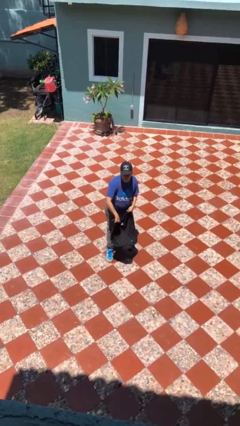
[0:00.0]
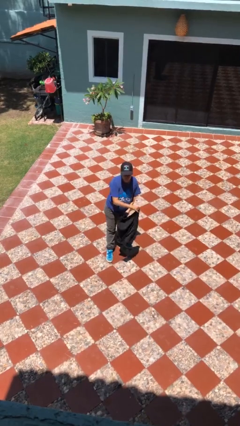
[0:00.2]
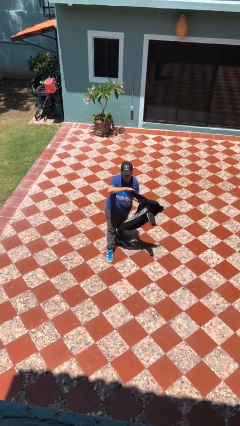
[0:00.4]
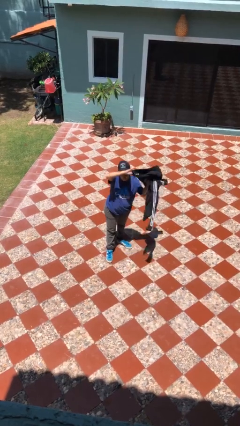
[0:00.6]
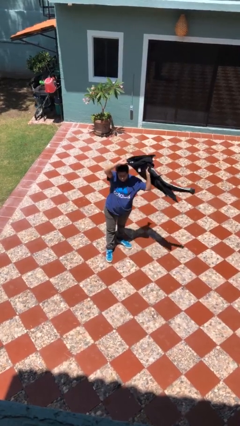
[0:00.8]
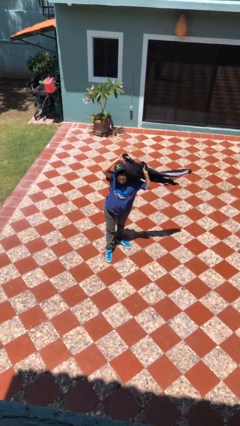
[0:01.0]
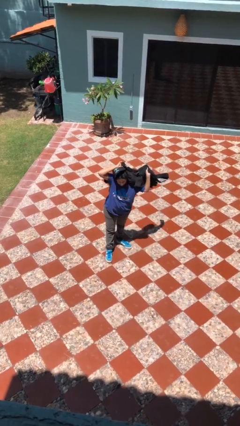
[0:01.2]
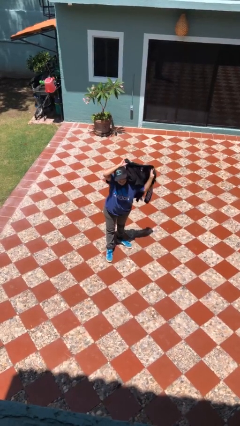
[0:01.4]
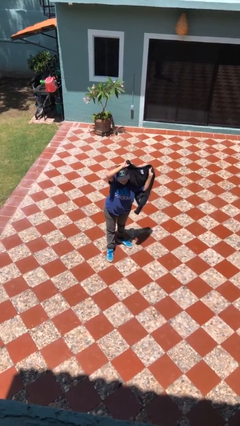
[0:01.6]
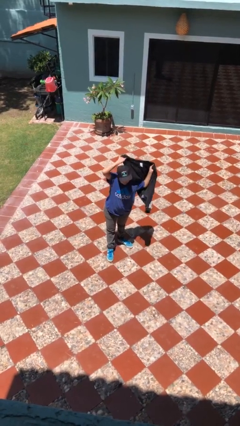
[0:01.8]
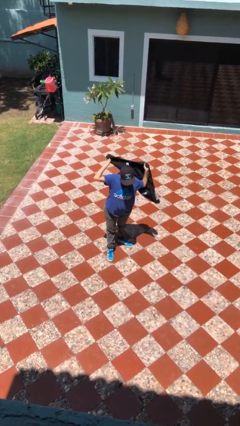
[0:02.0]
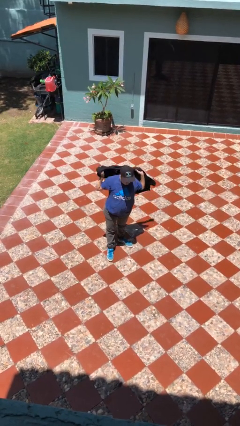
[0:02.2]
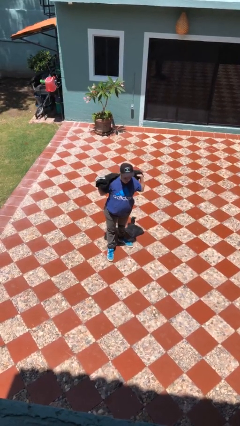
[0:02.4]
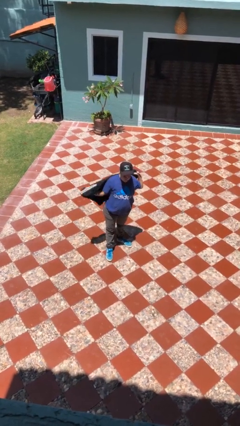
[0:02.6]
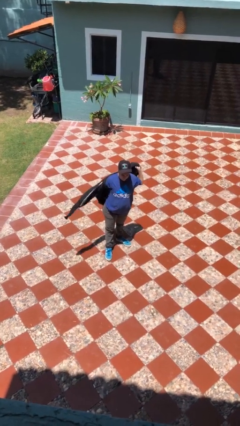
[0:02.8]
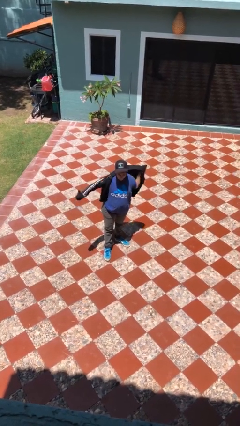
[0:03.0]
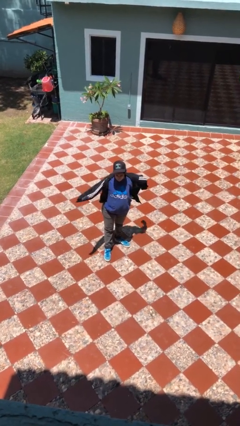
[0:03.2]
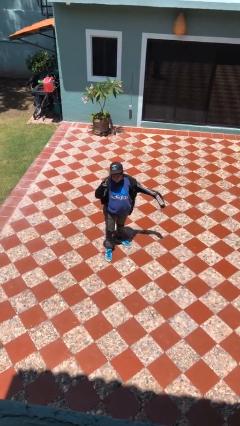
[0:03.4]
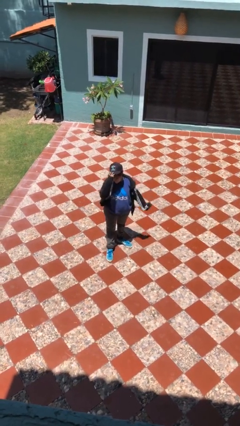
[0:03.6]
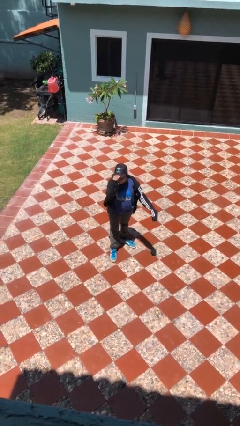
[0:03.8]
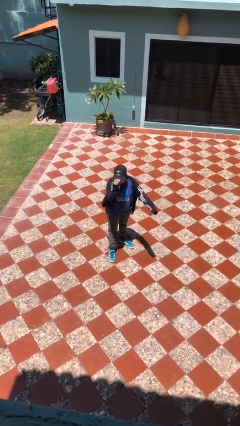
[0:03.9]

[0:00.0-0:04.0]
person puts on jacket

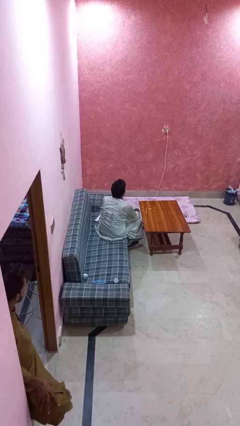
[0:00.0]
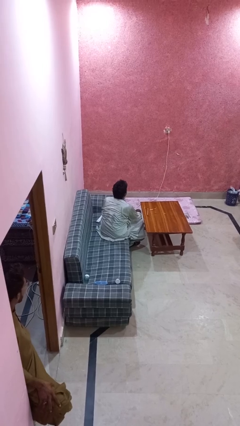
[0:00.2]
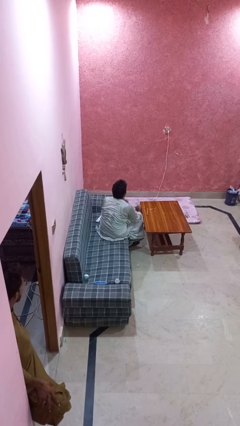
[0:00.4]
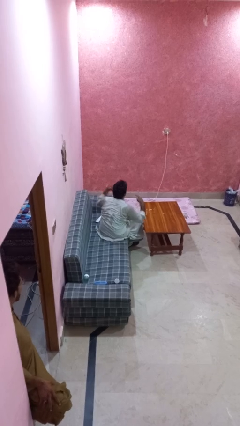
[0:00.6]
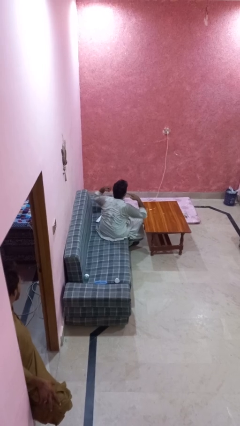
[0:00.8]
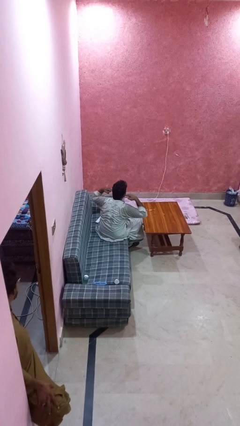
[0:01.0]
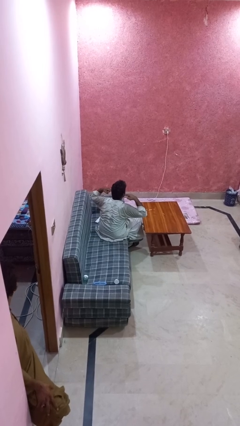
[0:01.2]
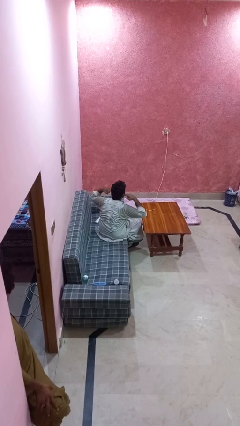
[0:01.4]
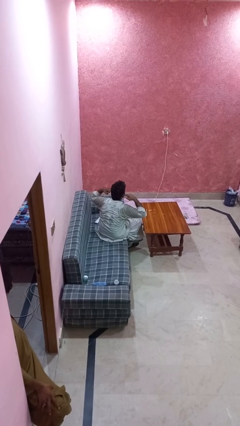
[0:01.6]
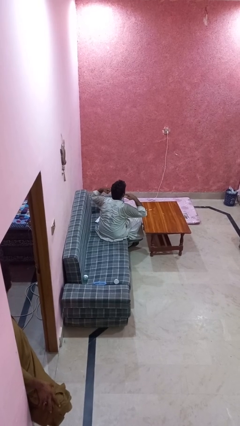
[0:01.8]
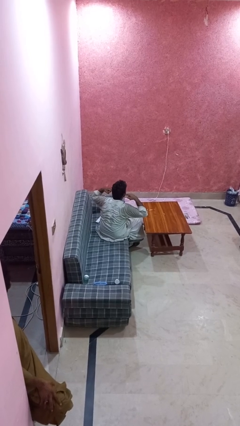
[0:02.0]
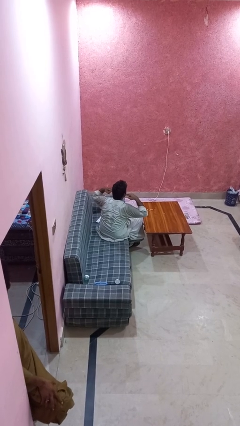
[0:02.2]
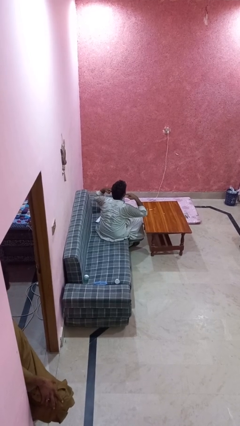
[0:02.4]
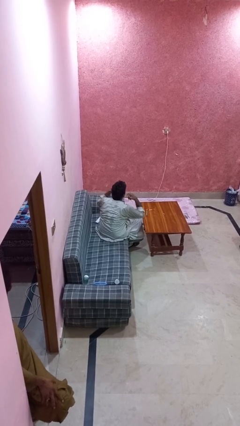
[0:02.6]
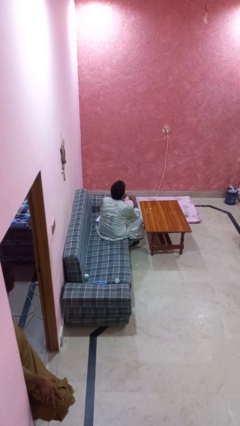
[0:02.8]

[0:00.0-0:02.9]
person puts fingers in ear

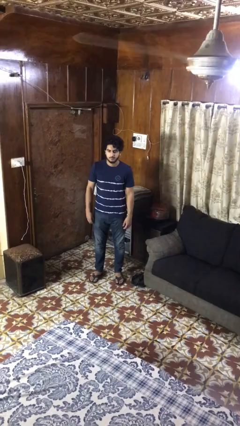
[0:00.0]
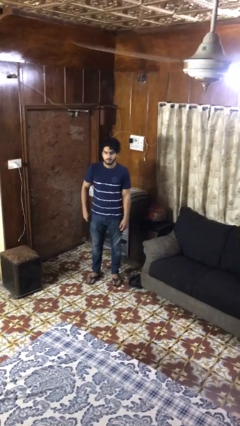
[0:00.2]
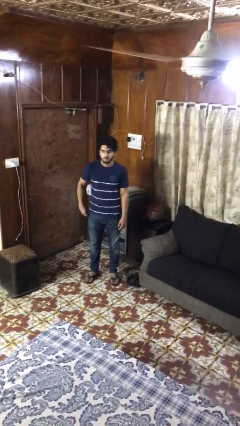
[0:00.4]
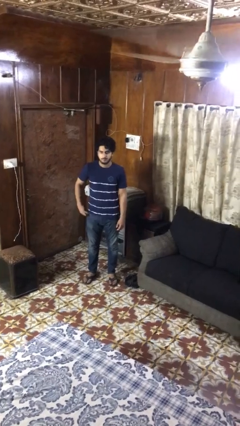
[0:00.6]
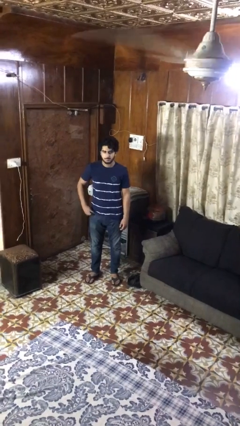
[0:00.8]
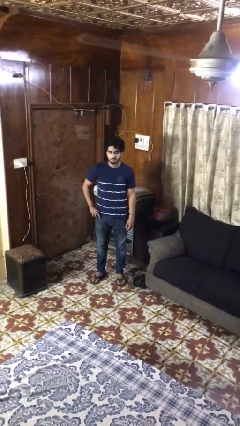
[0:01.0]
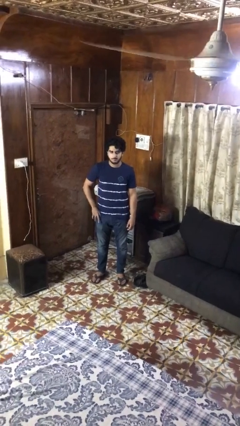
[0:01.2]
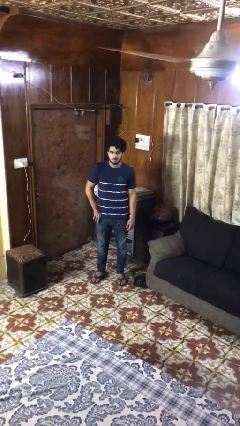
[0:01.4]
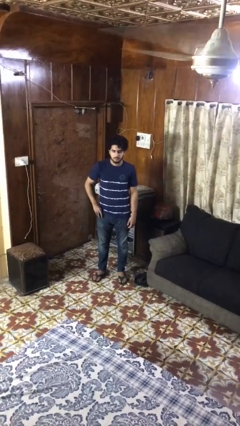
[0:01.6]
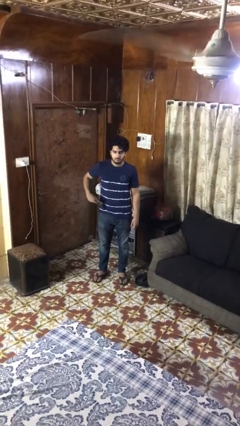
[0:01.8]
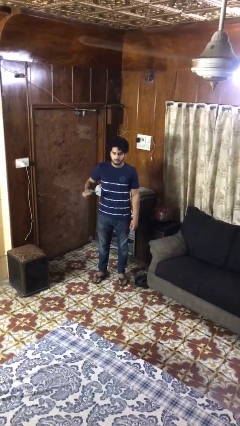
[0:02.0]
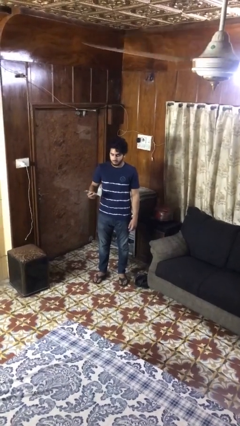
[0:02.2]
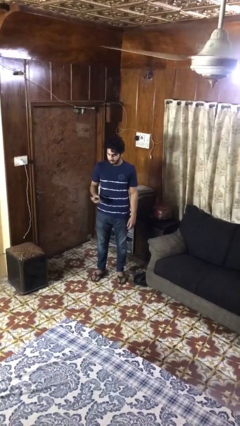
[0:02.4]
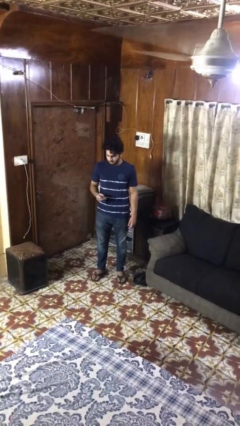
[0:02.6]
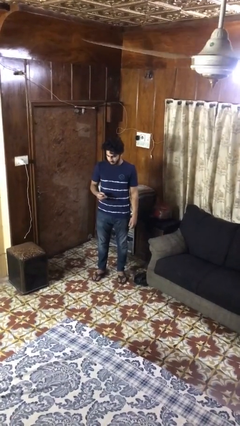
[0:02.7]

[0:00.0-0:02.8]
person takes phone from pocket

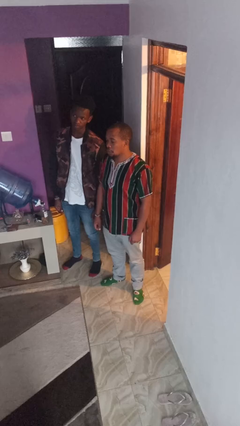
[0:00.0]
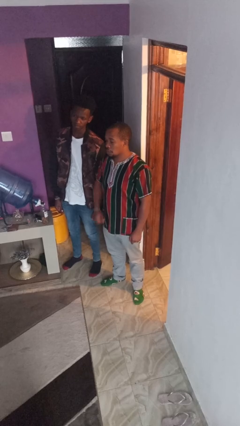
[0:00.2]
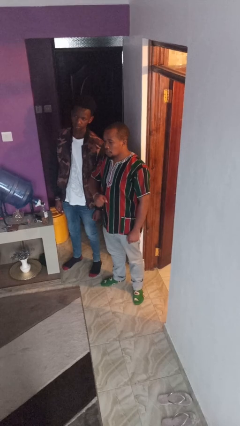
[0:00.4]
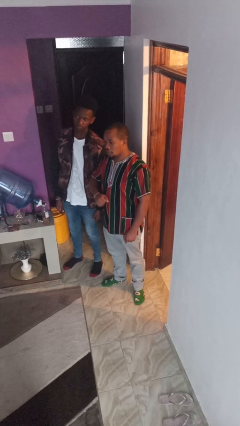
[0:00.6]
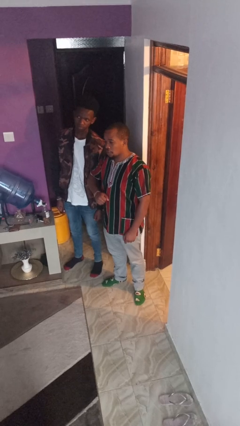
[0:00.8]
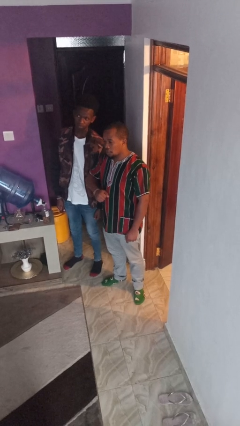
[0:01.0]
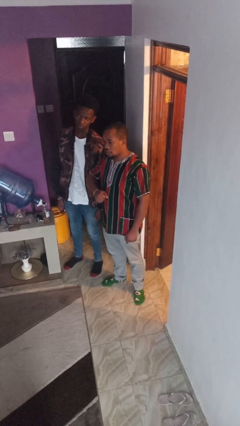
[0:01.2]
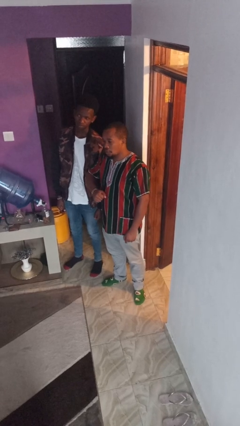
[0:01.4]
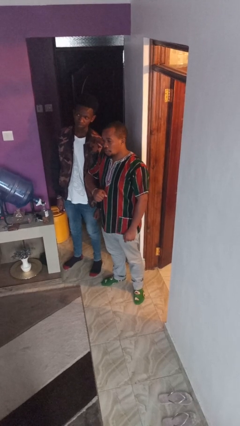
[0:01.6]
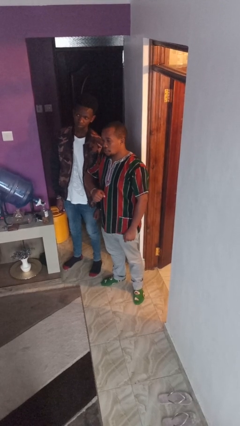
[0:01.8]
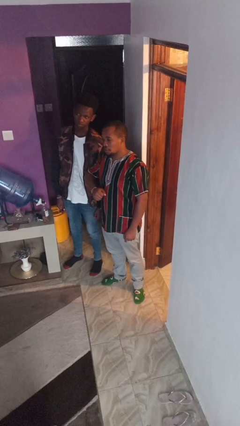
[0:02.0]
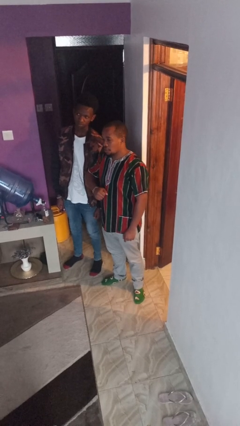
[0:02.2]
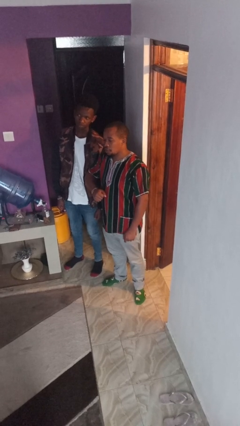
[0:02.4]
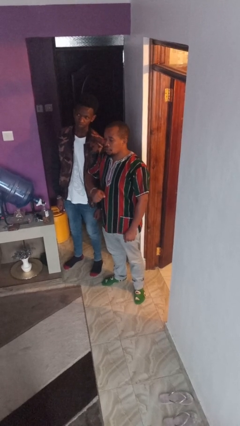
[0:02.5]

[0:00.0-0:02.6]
person nudges person with elbow

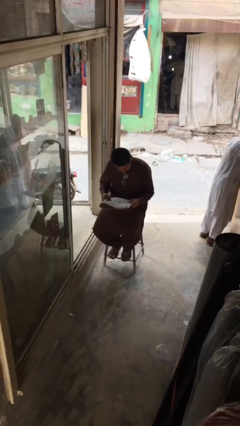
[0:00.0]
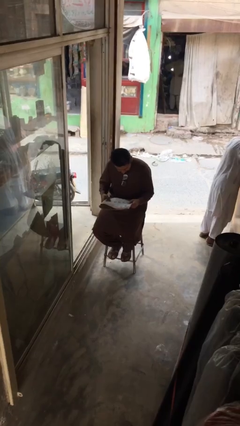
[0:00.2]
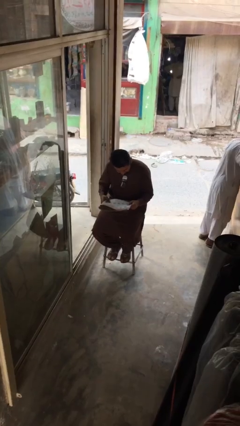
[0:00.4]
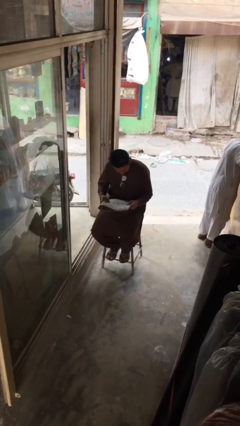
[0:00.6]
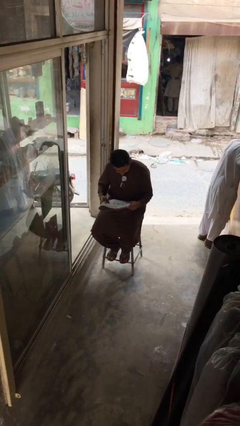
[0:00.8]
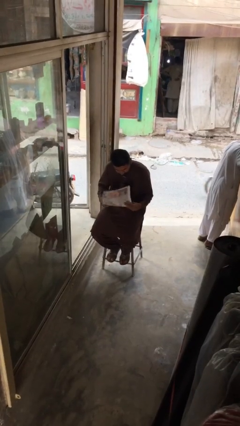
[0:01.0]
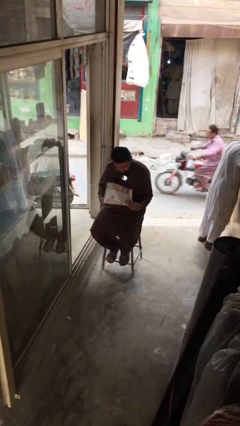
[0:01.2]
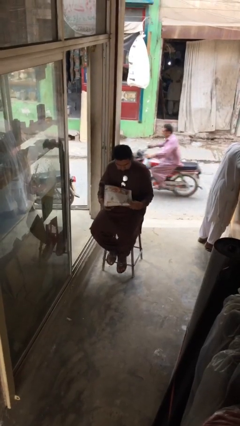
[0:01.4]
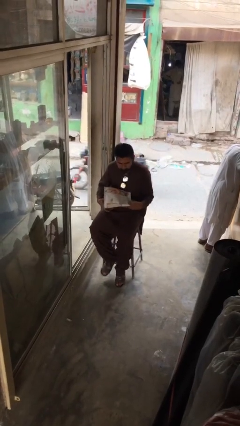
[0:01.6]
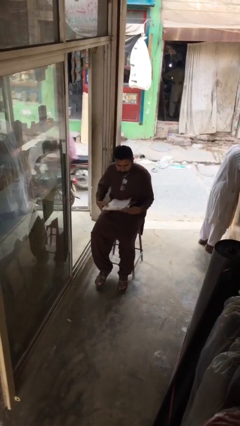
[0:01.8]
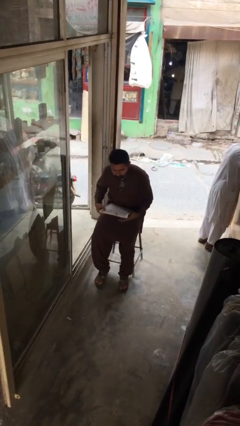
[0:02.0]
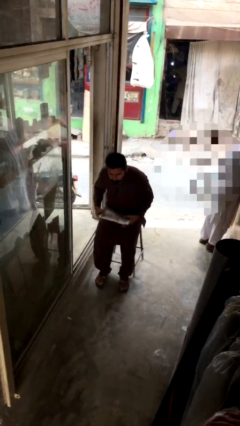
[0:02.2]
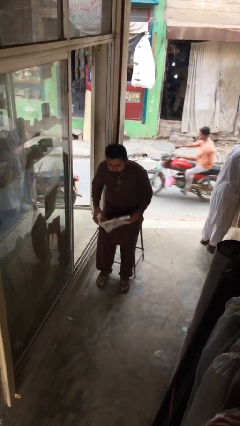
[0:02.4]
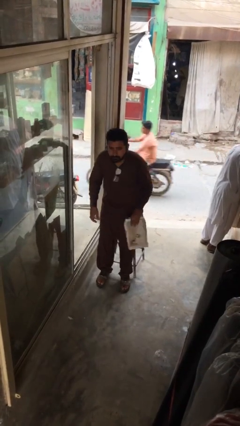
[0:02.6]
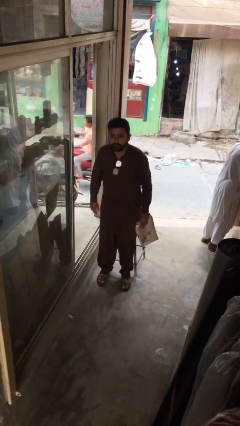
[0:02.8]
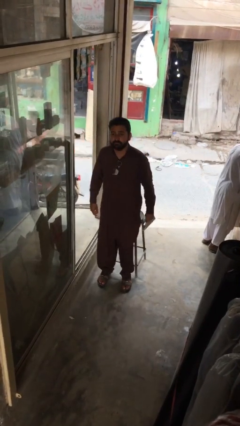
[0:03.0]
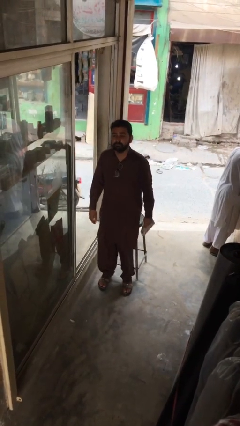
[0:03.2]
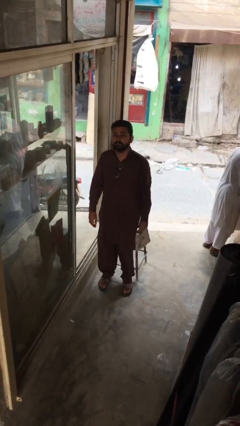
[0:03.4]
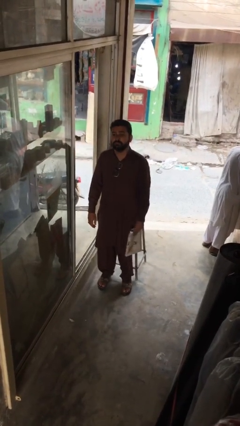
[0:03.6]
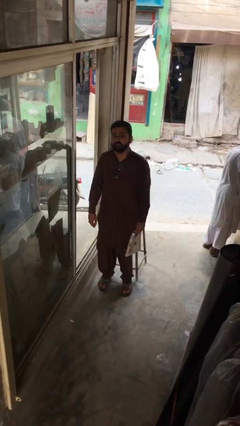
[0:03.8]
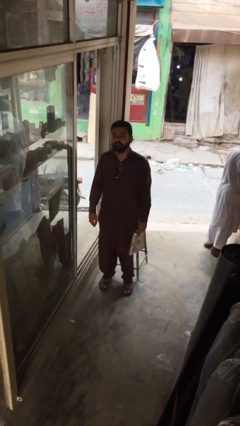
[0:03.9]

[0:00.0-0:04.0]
person stands up

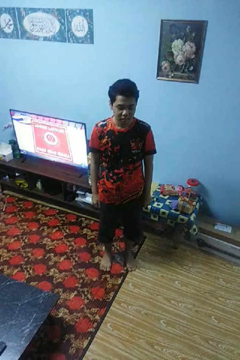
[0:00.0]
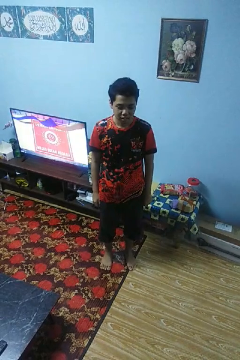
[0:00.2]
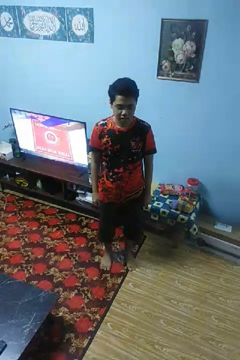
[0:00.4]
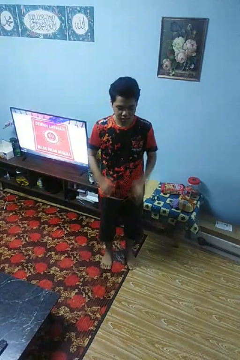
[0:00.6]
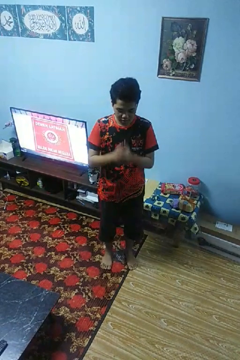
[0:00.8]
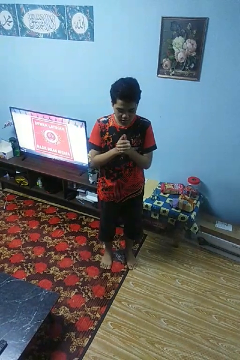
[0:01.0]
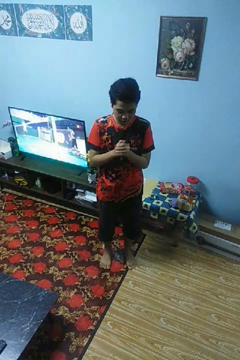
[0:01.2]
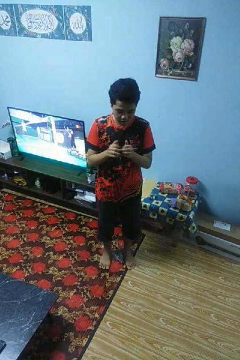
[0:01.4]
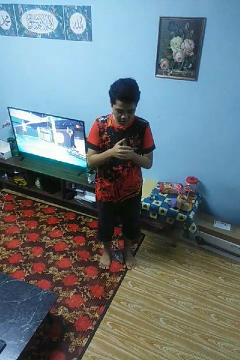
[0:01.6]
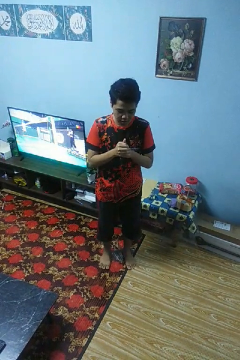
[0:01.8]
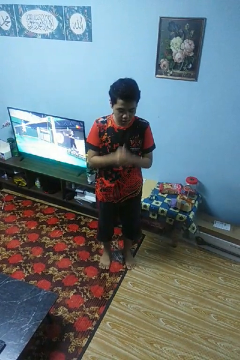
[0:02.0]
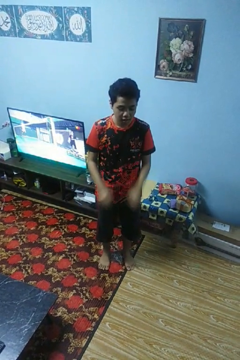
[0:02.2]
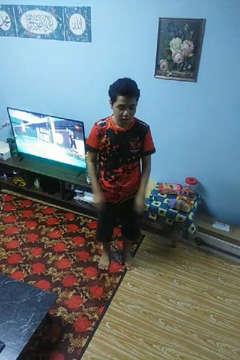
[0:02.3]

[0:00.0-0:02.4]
person cracks knuckles
